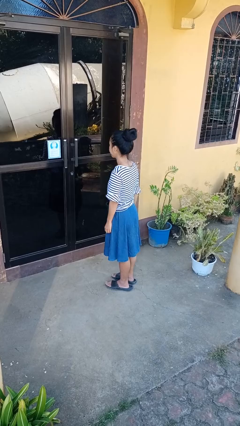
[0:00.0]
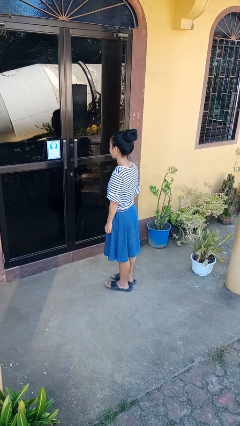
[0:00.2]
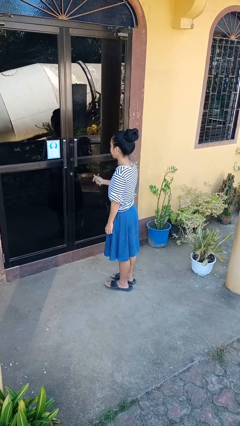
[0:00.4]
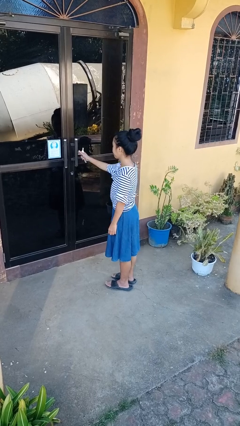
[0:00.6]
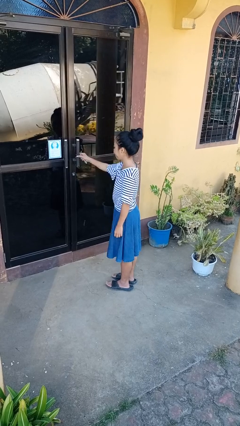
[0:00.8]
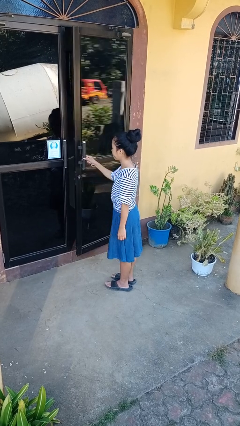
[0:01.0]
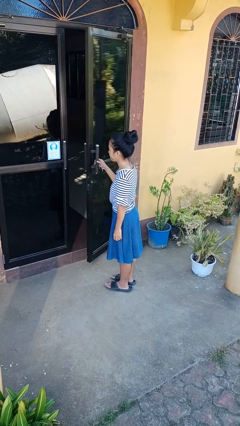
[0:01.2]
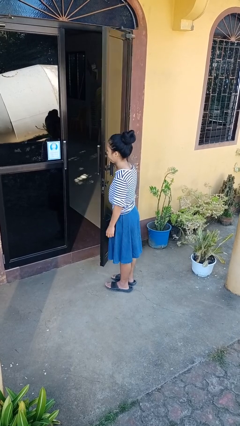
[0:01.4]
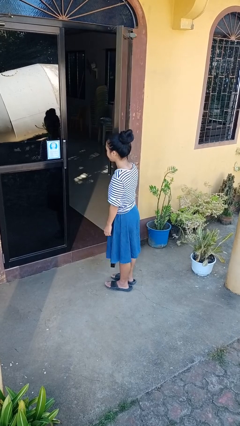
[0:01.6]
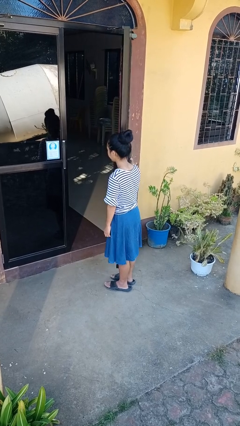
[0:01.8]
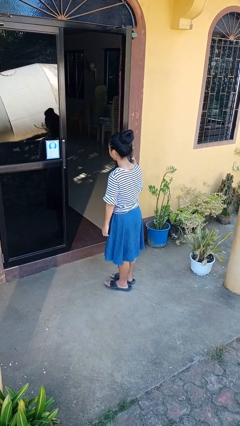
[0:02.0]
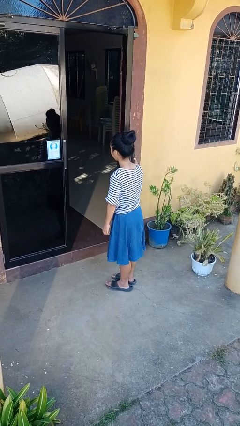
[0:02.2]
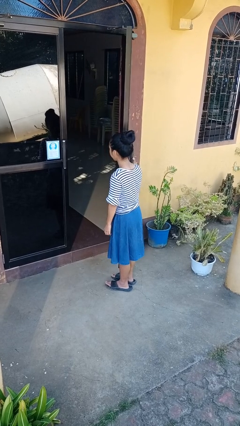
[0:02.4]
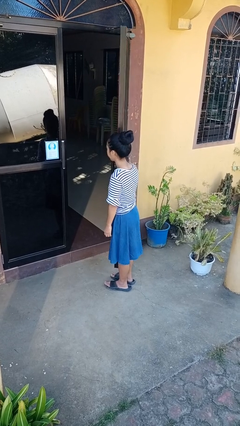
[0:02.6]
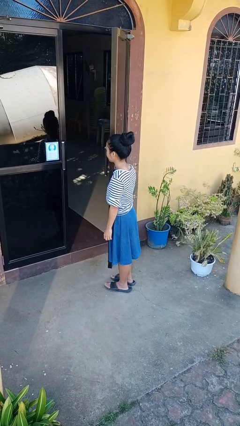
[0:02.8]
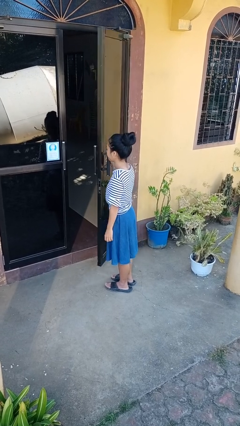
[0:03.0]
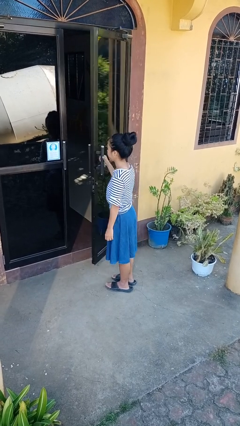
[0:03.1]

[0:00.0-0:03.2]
person opens facility door

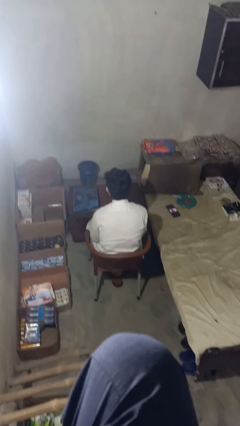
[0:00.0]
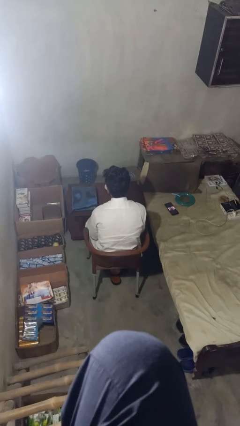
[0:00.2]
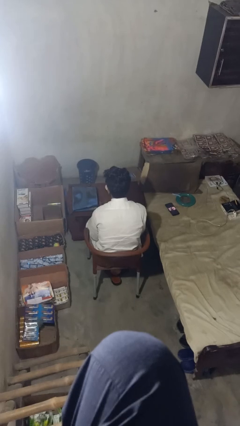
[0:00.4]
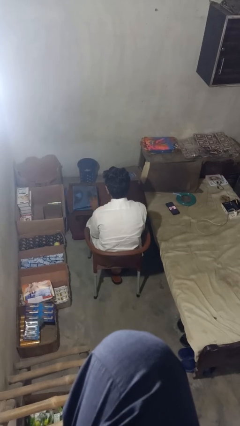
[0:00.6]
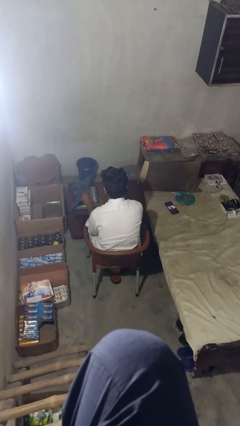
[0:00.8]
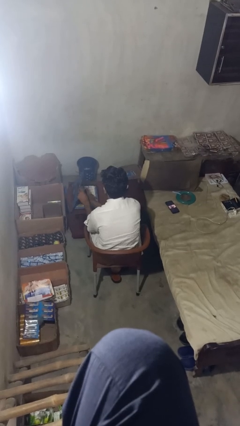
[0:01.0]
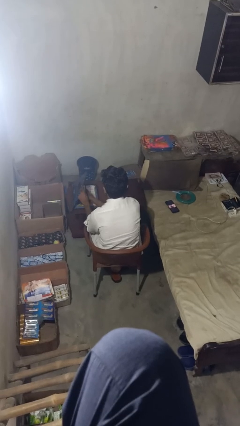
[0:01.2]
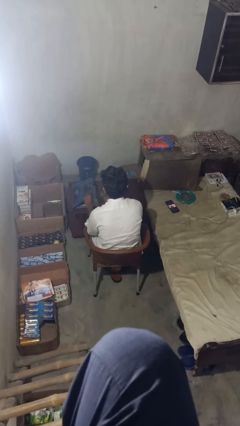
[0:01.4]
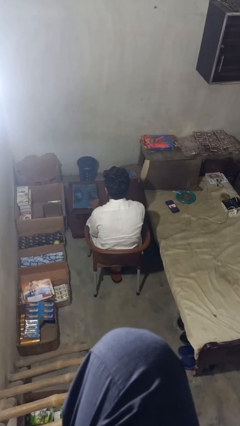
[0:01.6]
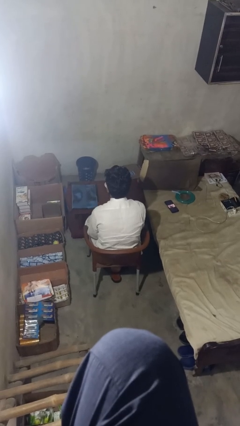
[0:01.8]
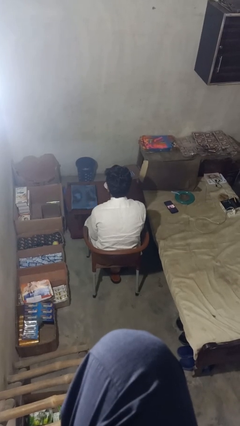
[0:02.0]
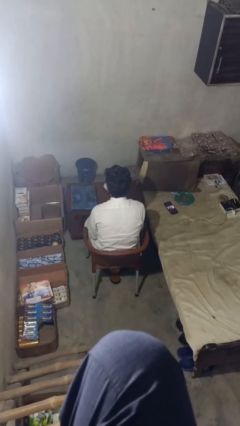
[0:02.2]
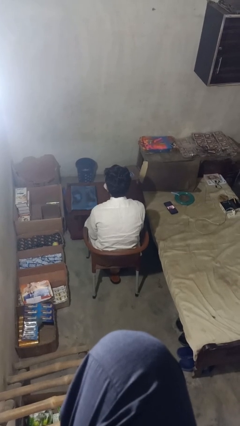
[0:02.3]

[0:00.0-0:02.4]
person puts object into bag

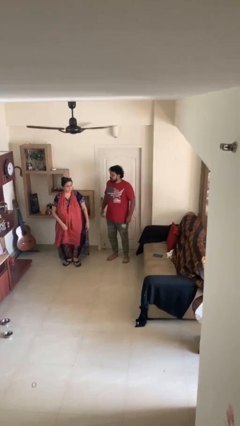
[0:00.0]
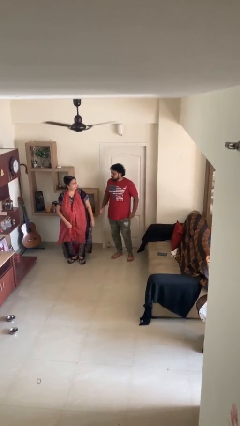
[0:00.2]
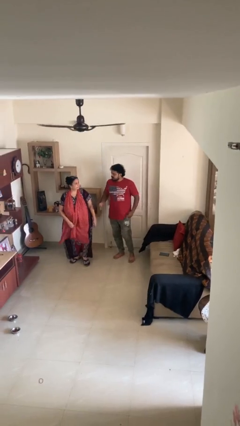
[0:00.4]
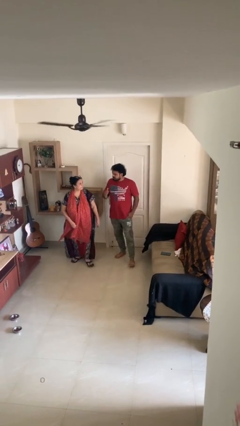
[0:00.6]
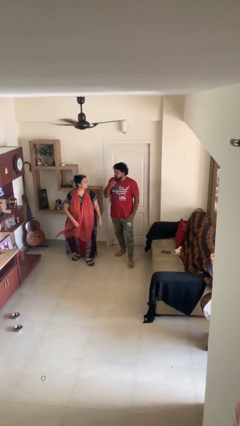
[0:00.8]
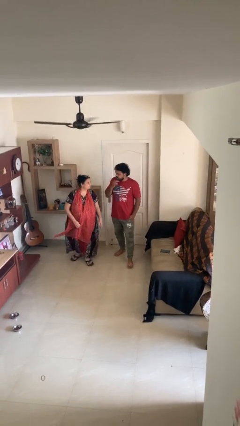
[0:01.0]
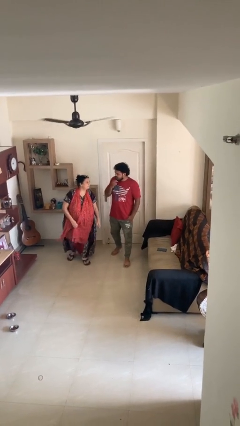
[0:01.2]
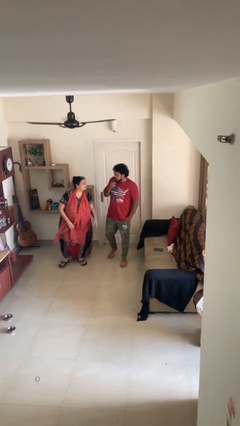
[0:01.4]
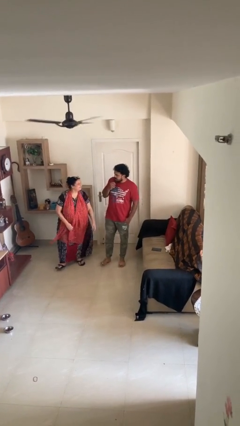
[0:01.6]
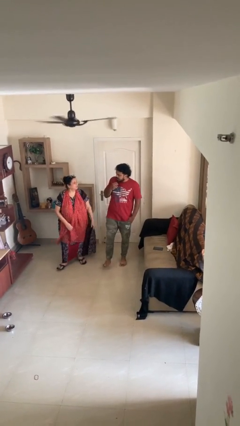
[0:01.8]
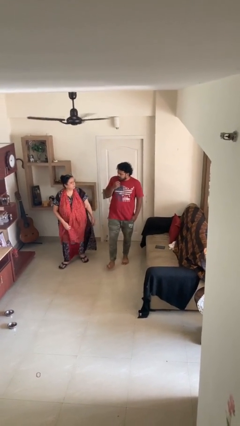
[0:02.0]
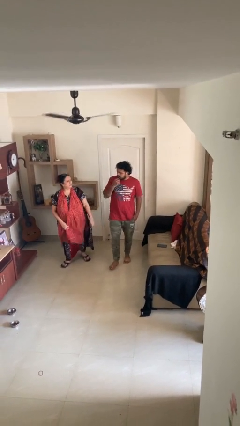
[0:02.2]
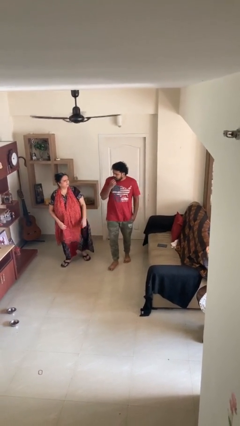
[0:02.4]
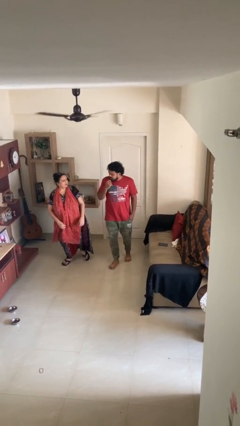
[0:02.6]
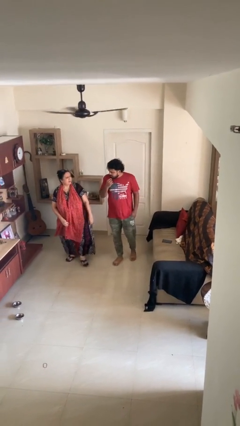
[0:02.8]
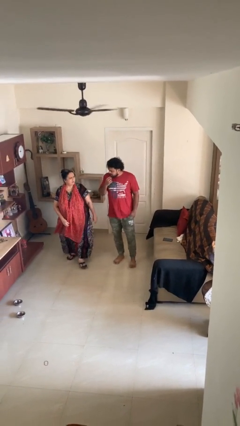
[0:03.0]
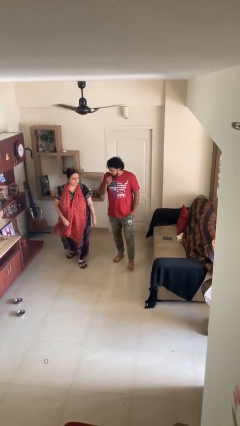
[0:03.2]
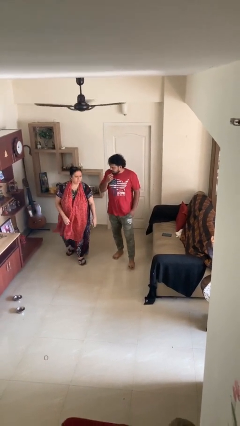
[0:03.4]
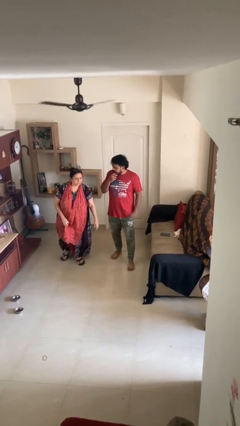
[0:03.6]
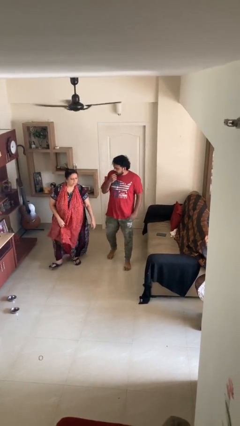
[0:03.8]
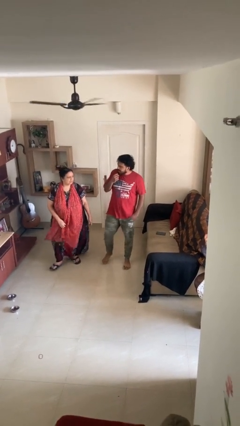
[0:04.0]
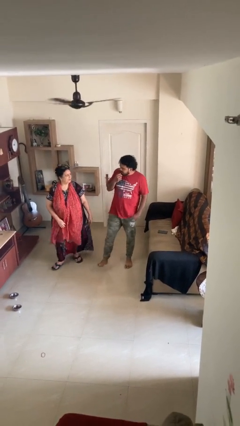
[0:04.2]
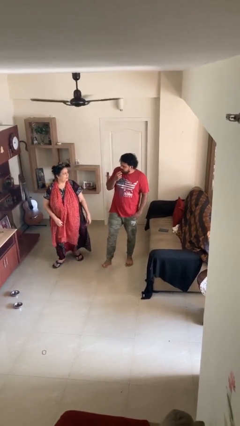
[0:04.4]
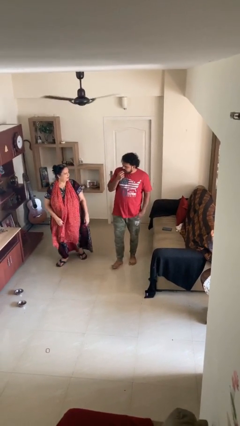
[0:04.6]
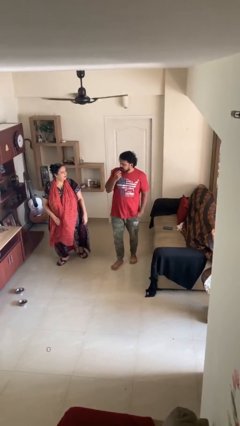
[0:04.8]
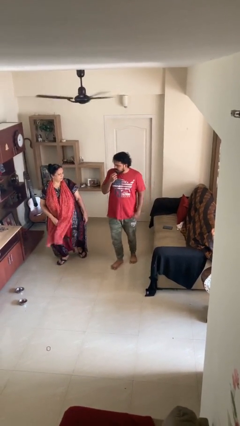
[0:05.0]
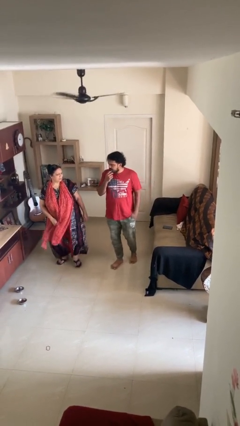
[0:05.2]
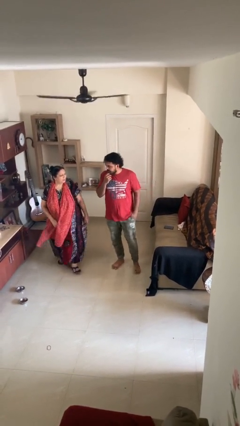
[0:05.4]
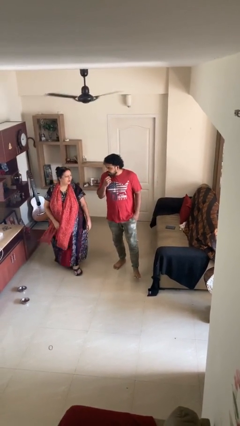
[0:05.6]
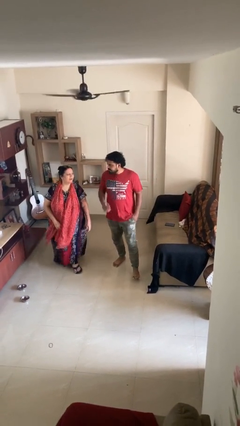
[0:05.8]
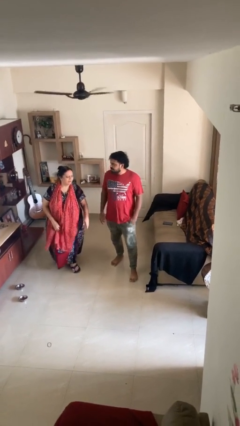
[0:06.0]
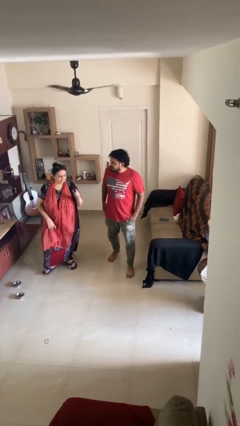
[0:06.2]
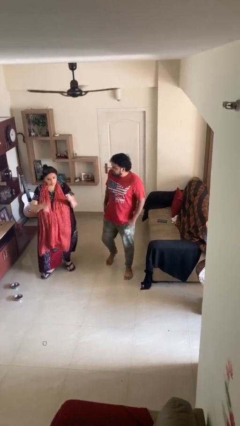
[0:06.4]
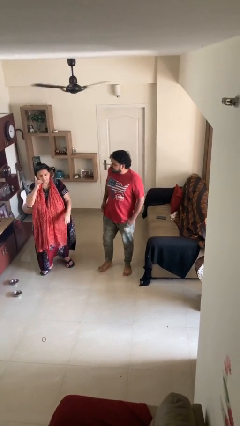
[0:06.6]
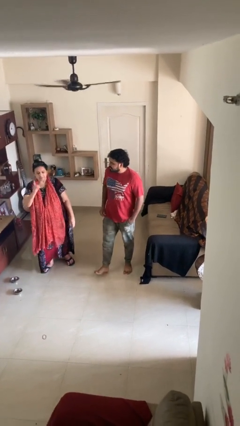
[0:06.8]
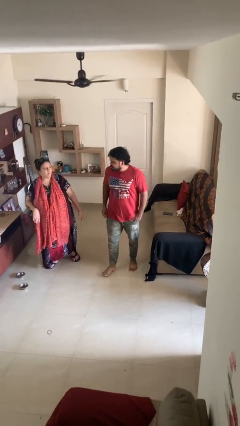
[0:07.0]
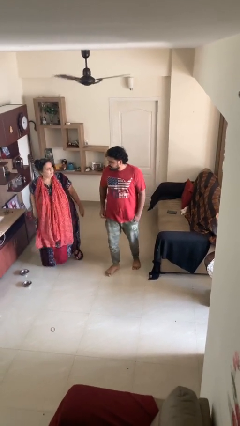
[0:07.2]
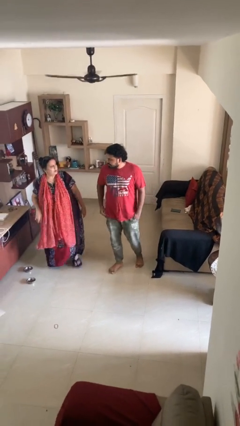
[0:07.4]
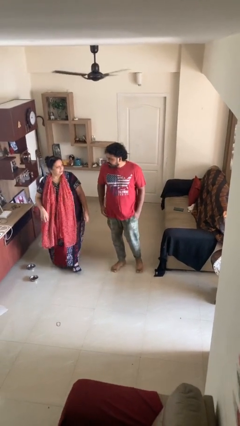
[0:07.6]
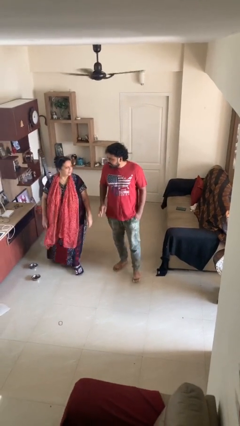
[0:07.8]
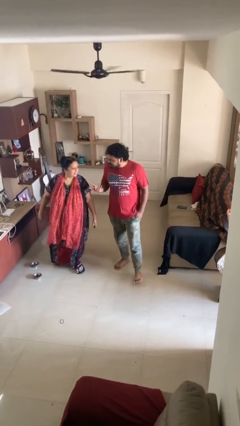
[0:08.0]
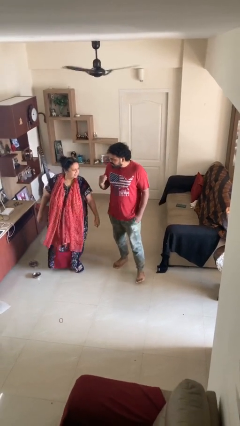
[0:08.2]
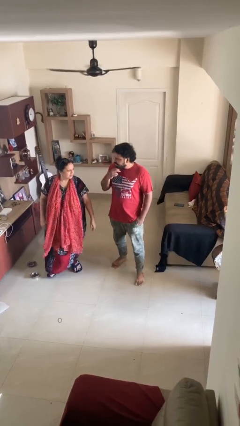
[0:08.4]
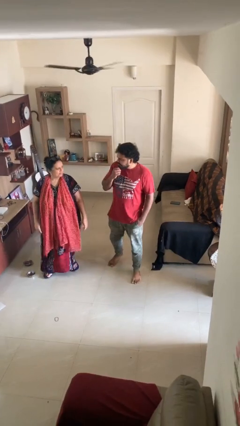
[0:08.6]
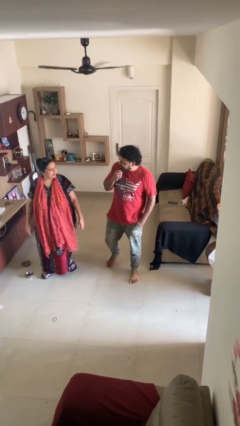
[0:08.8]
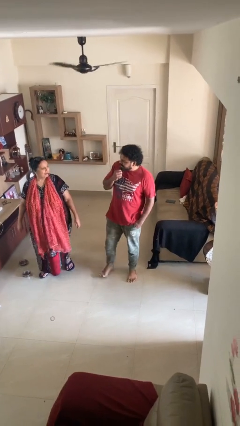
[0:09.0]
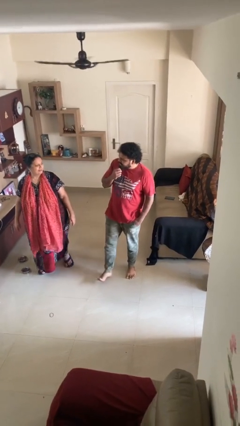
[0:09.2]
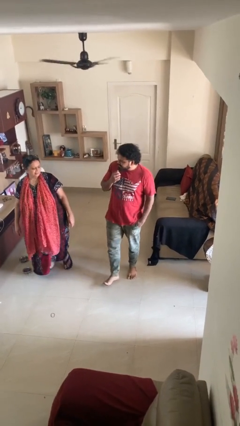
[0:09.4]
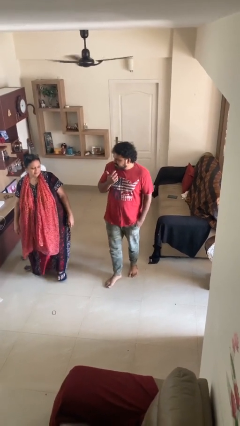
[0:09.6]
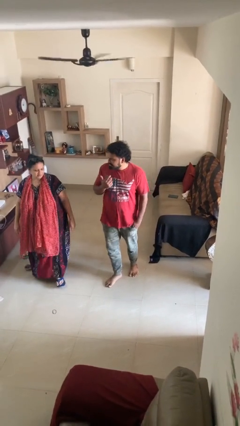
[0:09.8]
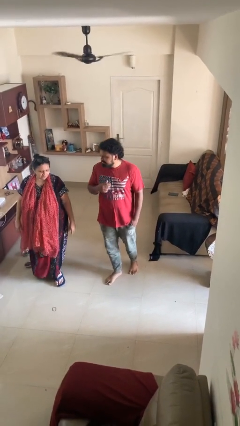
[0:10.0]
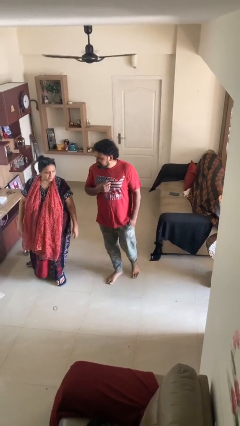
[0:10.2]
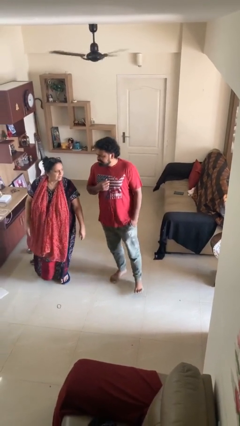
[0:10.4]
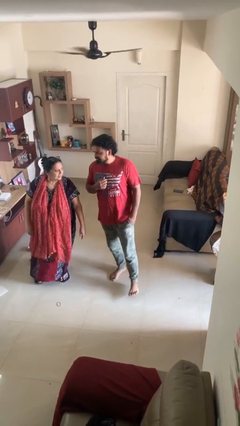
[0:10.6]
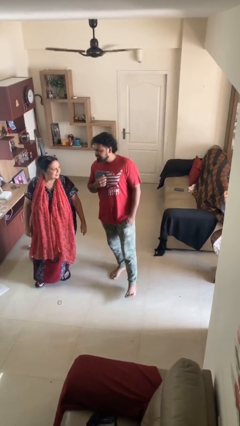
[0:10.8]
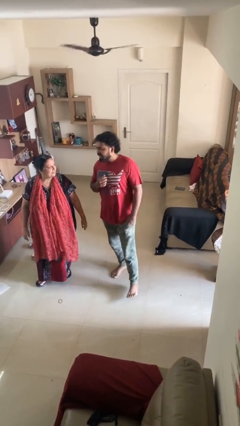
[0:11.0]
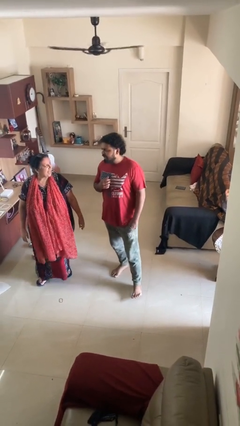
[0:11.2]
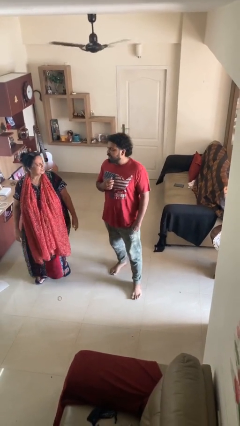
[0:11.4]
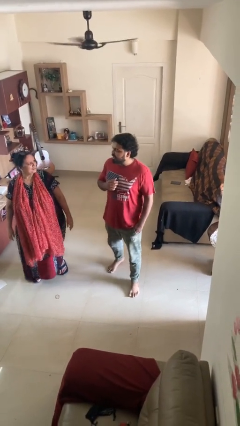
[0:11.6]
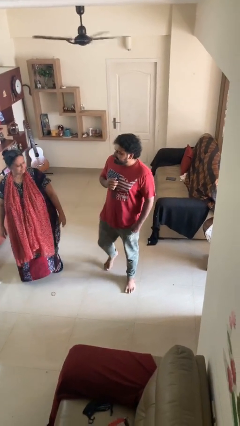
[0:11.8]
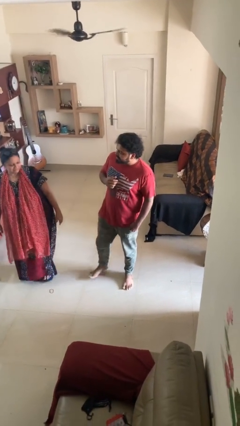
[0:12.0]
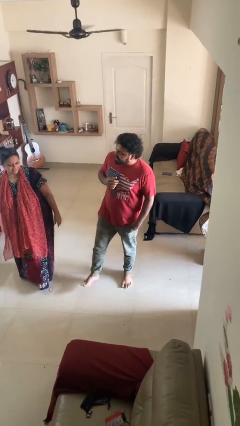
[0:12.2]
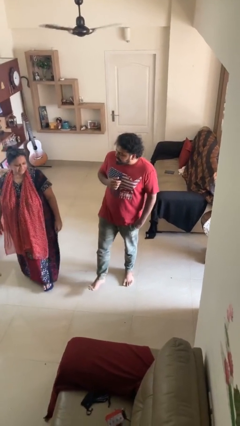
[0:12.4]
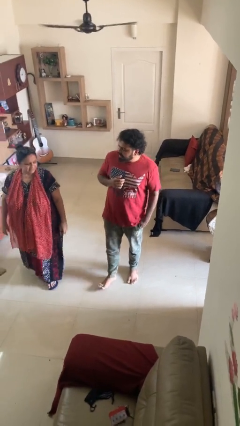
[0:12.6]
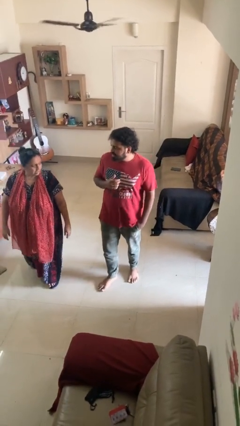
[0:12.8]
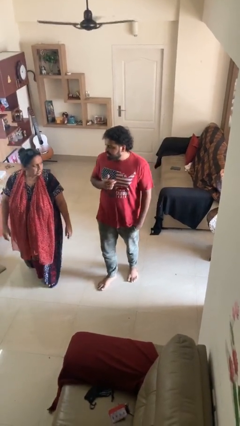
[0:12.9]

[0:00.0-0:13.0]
person talks to person
